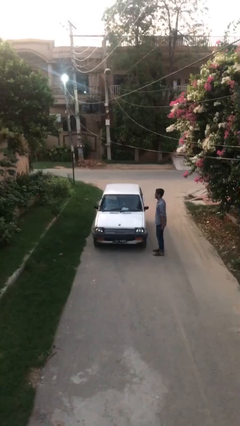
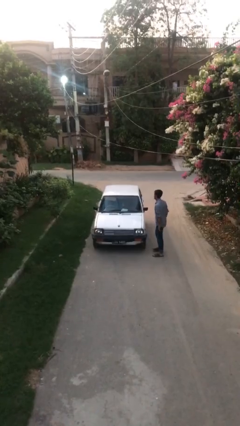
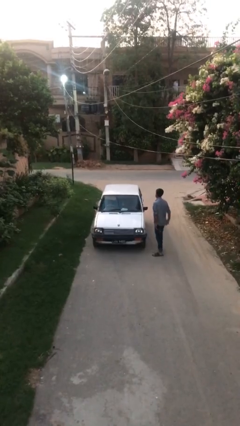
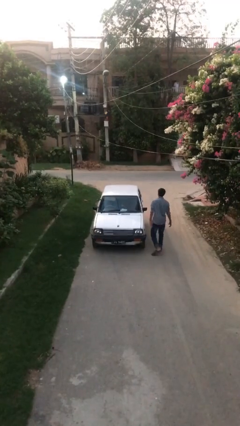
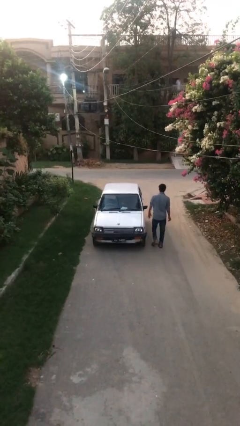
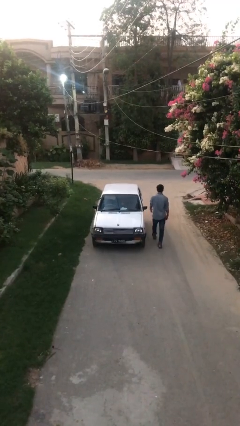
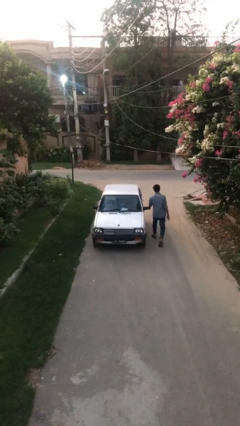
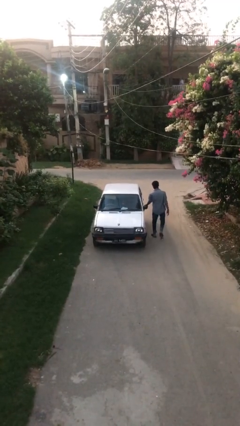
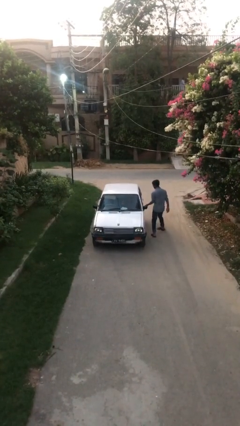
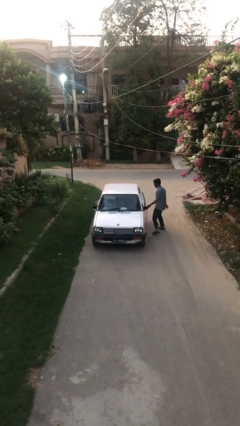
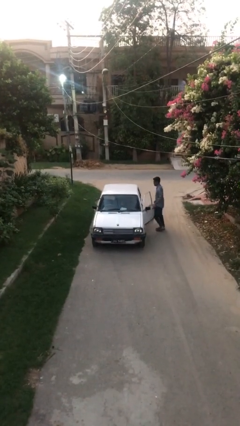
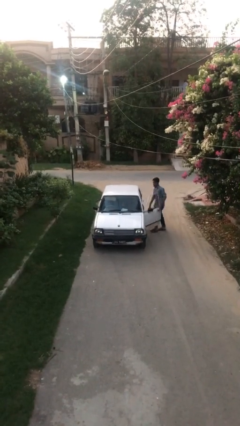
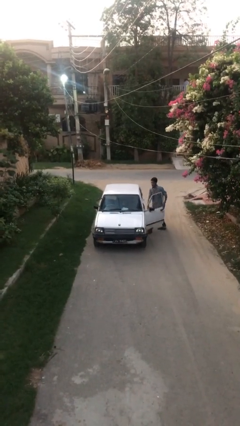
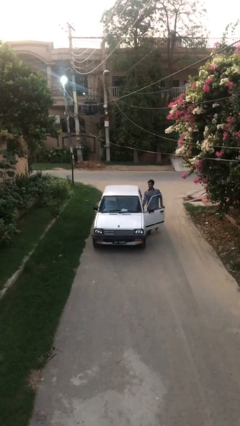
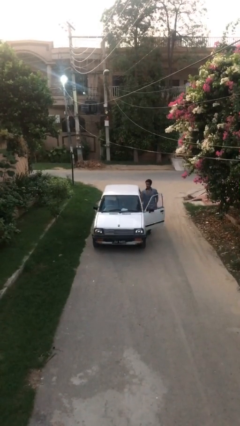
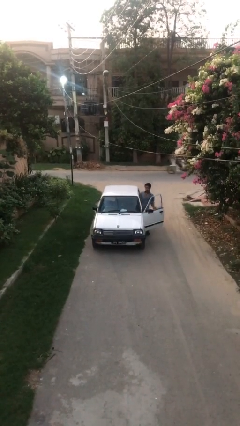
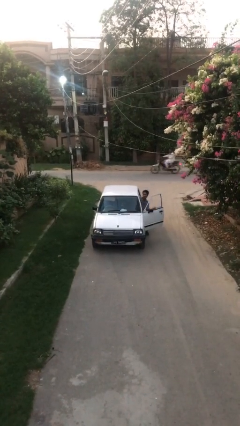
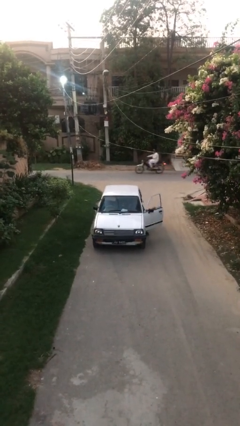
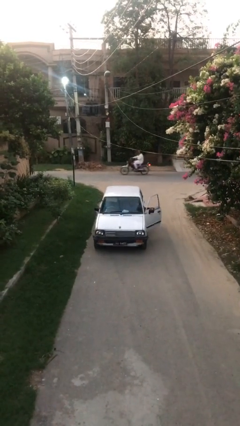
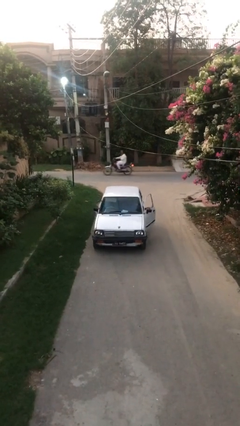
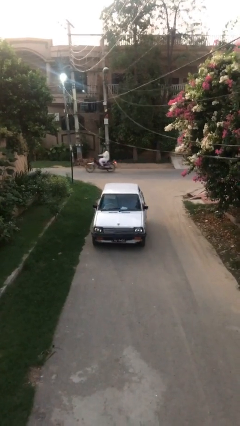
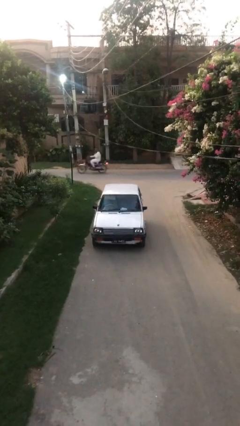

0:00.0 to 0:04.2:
car picks up person

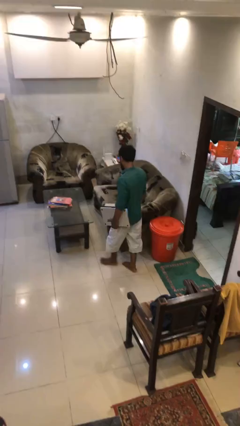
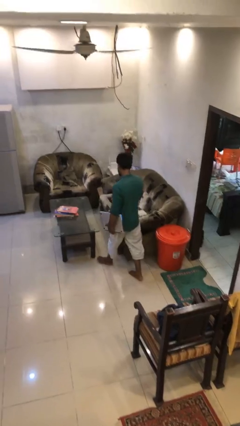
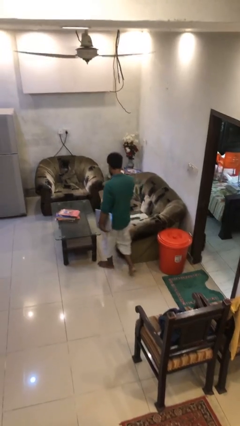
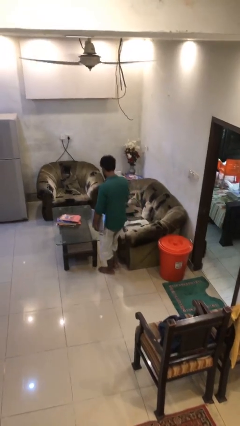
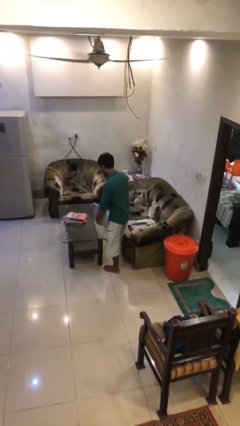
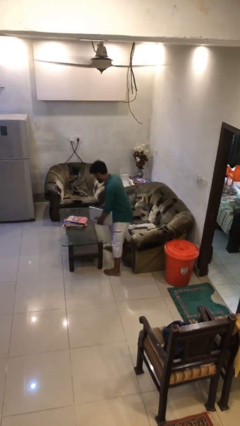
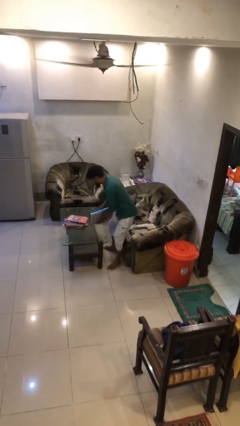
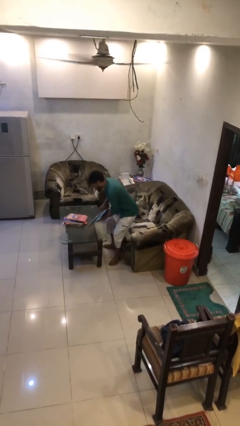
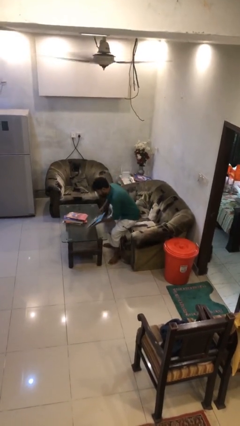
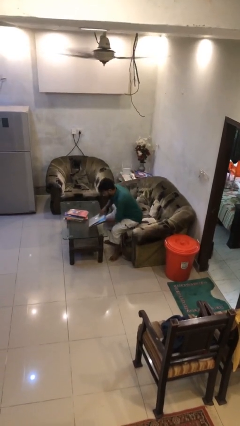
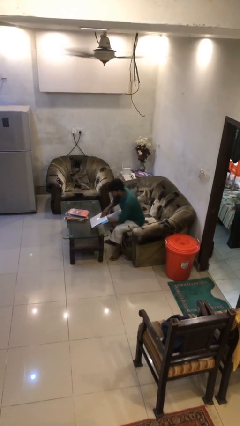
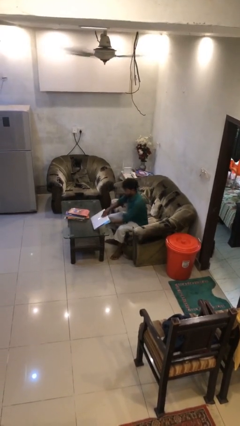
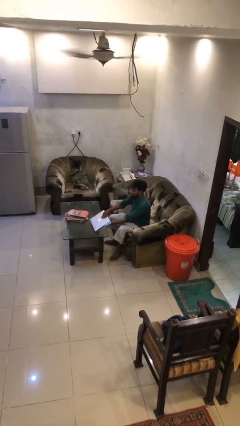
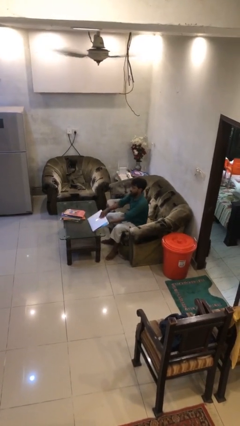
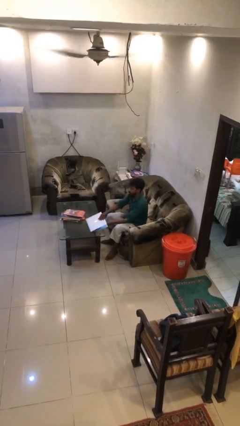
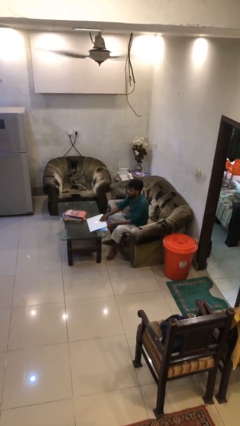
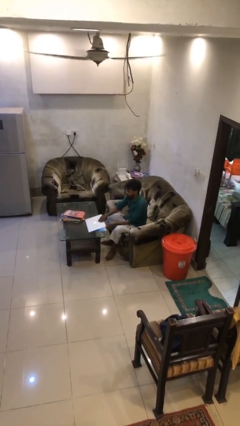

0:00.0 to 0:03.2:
person sits down

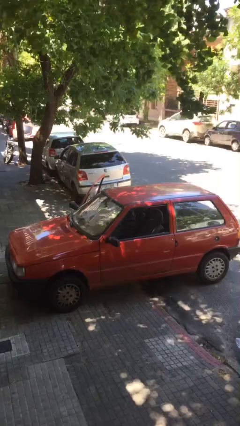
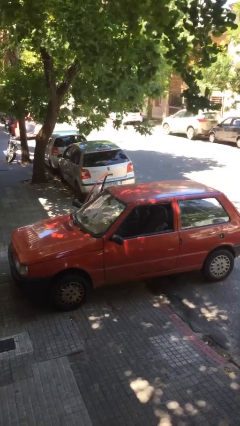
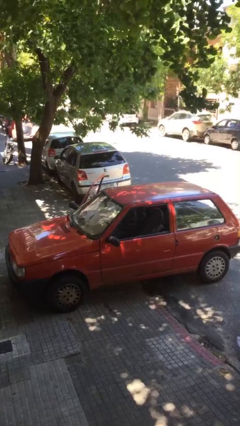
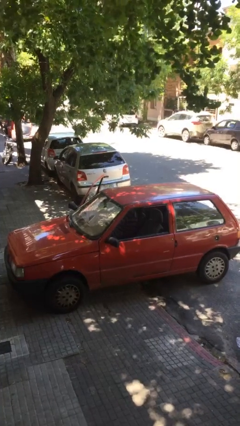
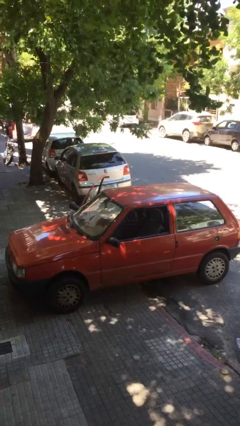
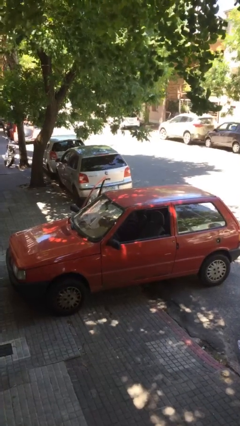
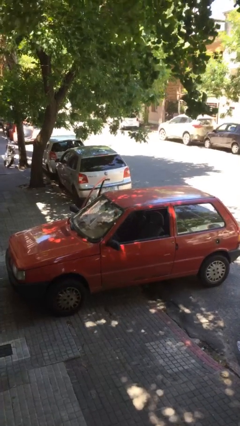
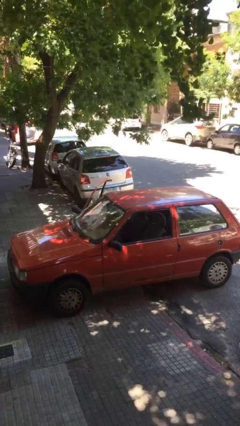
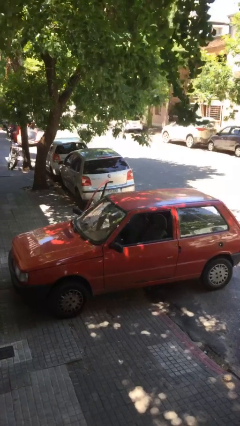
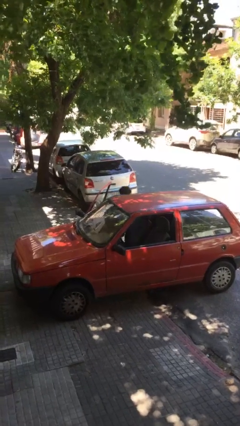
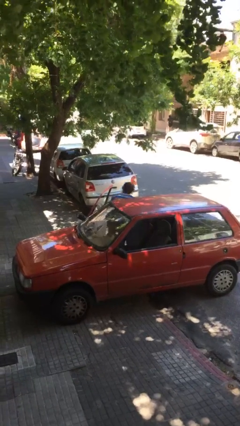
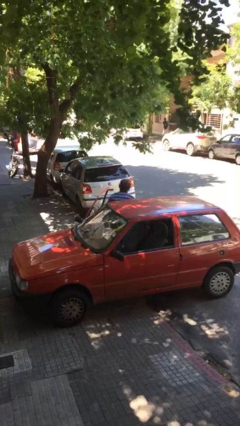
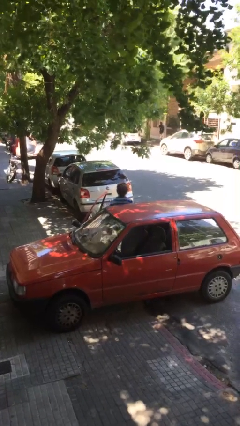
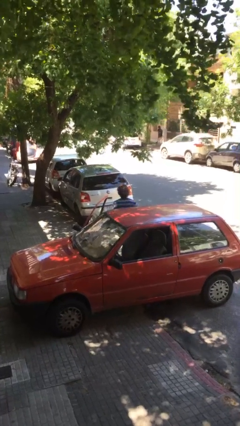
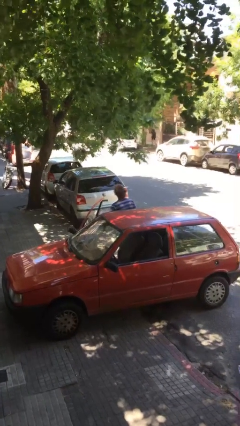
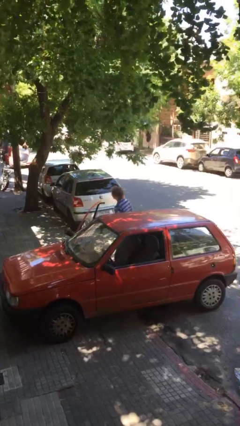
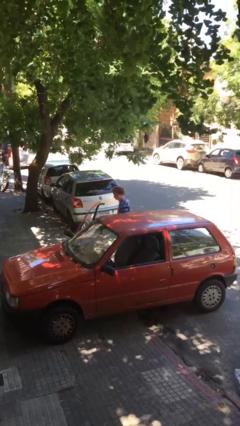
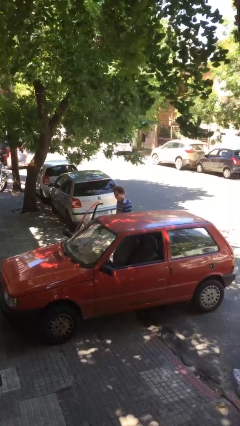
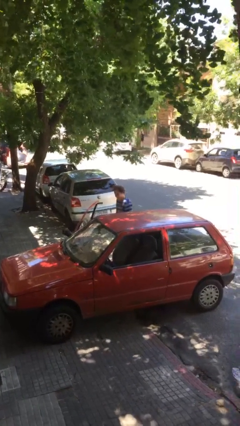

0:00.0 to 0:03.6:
person exits car

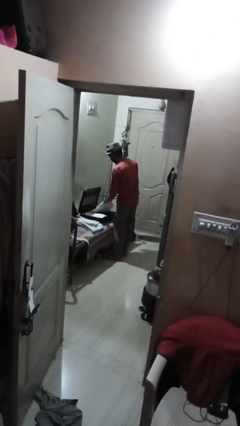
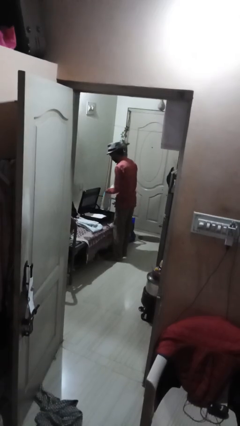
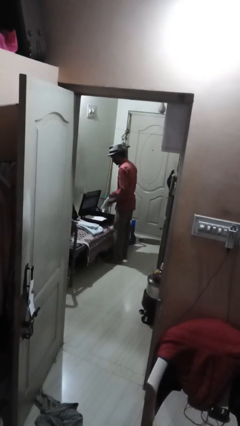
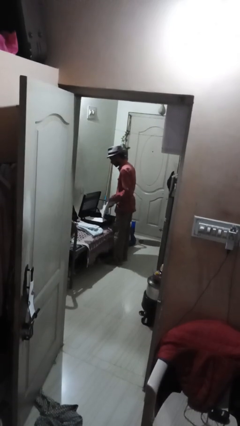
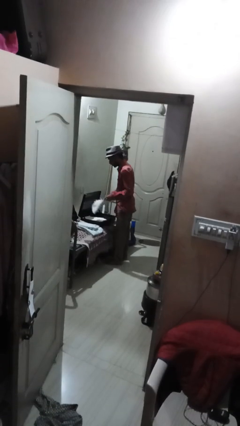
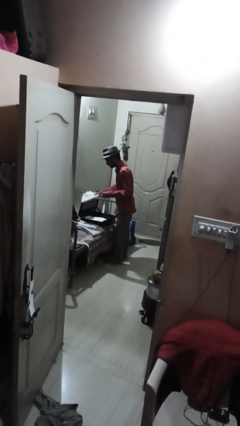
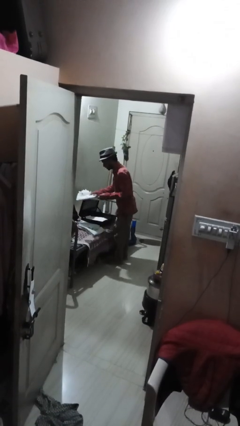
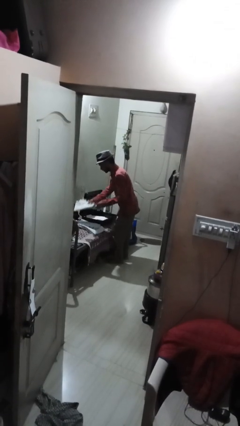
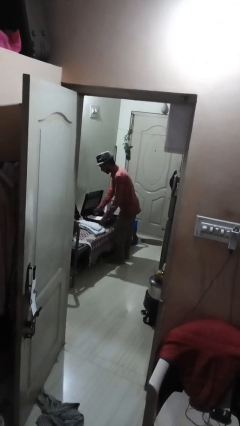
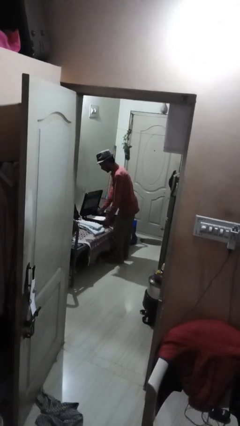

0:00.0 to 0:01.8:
person unloads clothes from suitcase

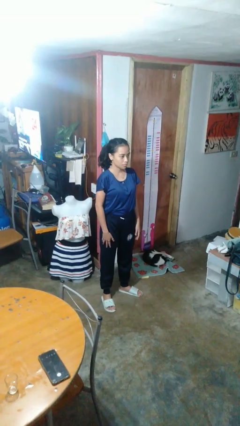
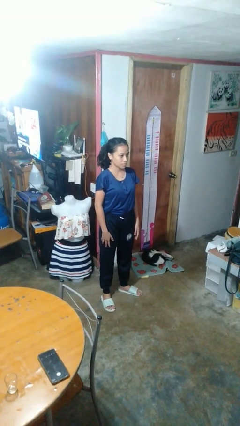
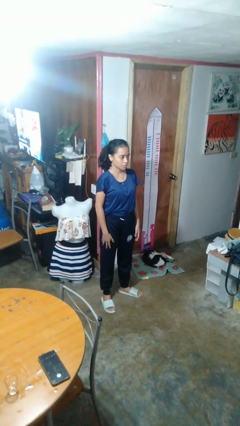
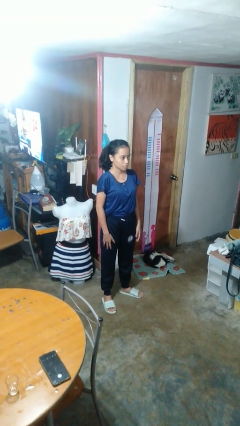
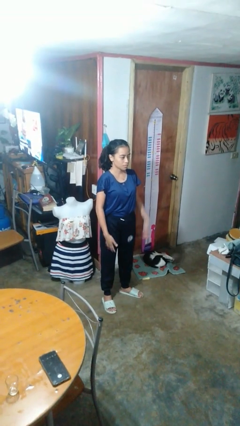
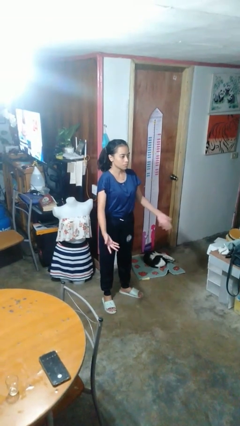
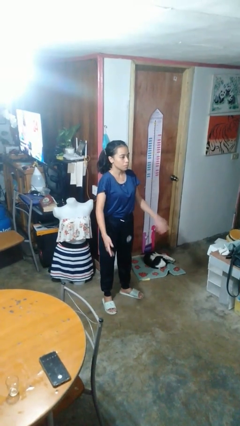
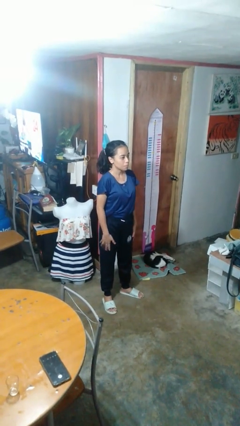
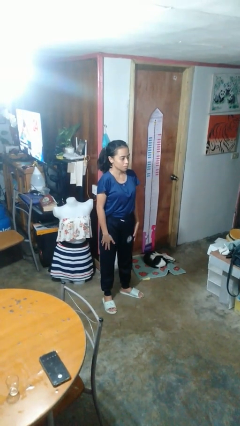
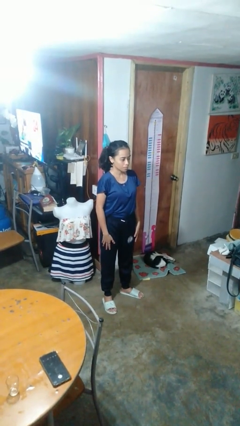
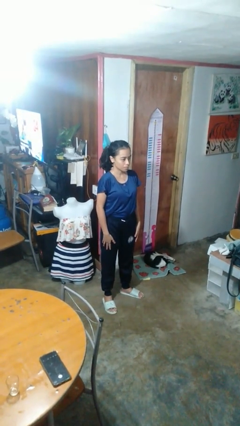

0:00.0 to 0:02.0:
person slaps hands on thighs

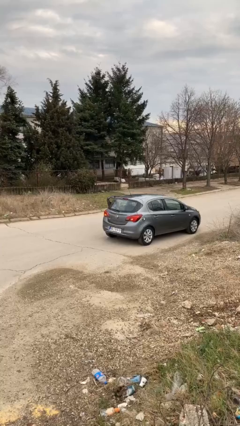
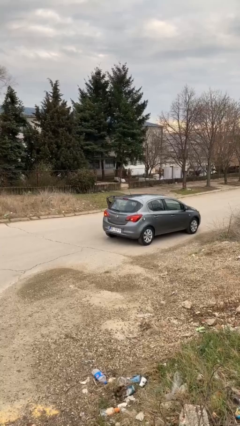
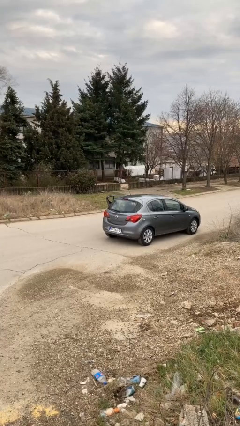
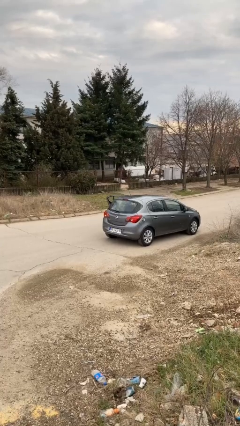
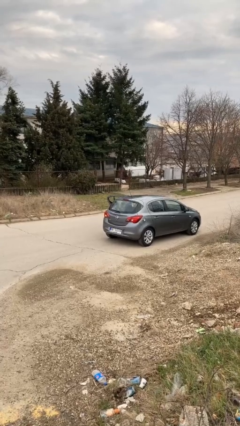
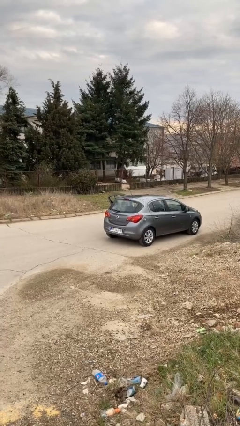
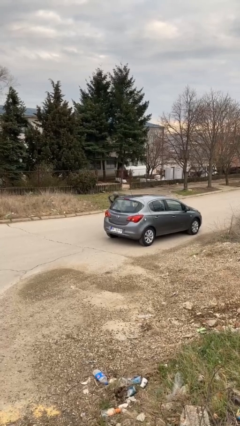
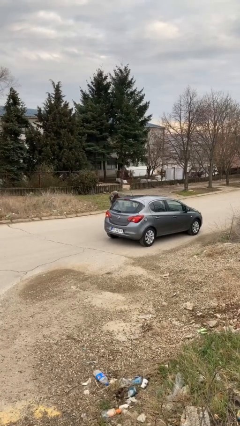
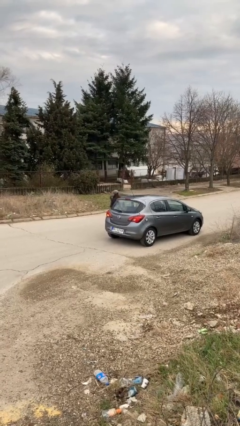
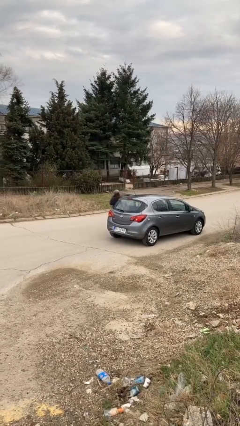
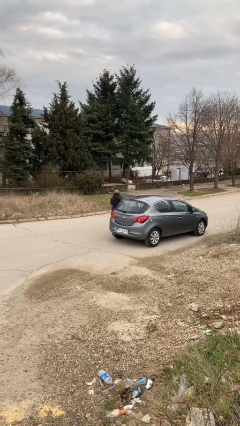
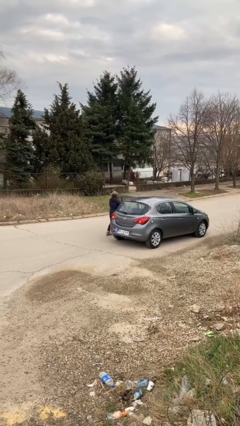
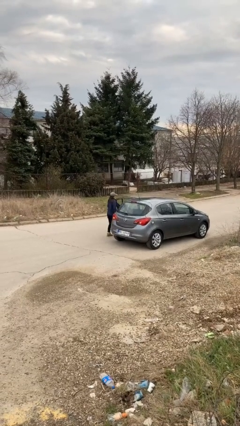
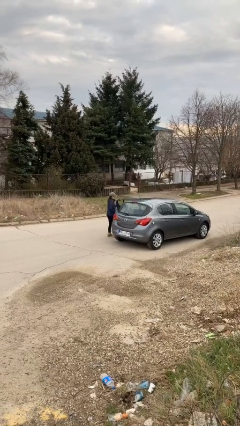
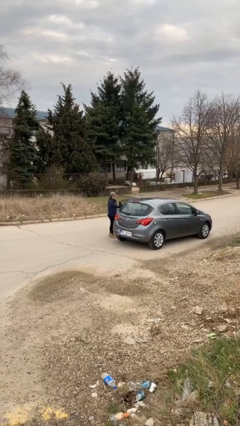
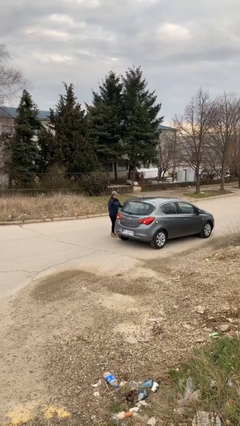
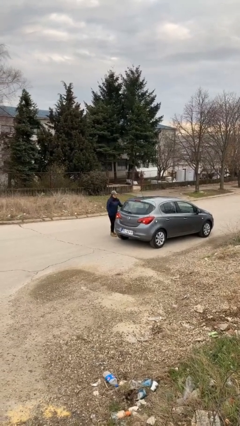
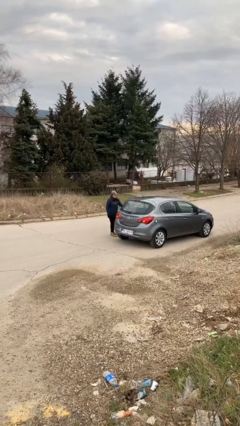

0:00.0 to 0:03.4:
car drops off person
